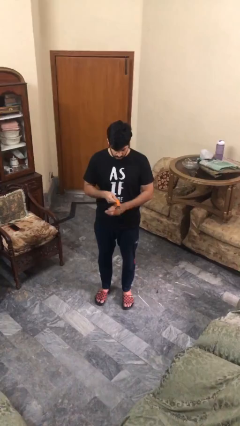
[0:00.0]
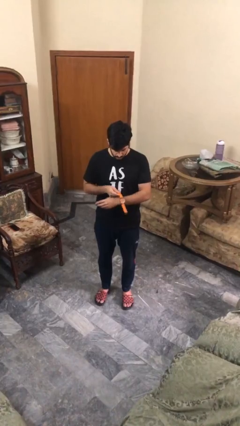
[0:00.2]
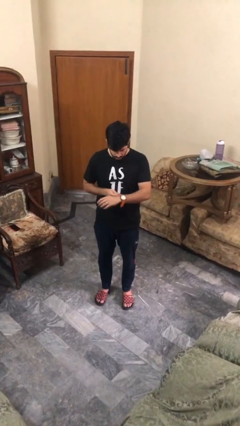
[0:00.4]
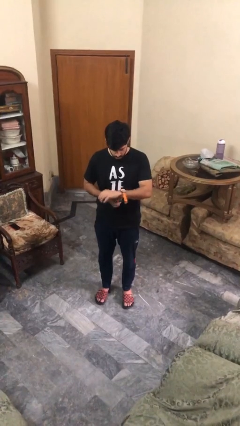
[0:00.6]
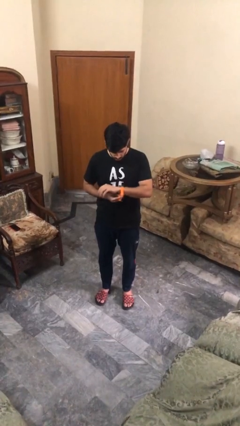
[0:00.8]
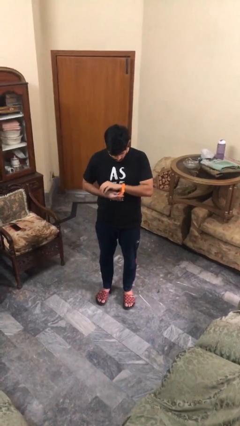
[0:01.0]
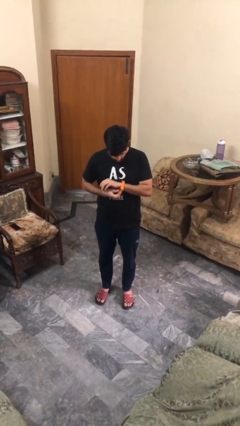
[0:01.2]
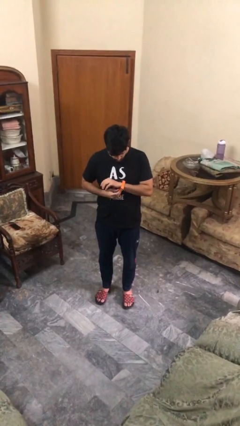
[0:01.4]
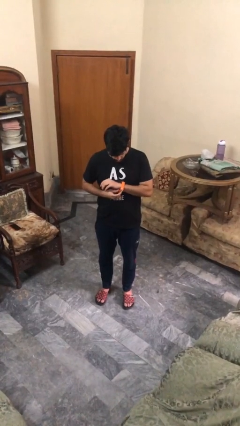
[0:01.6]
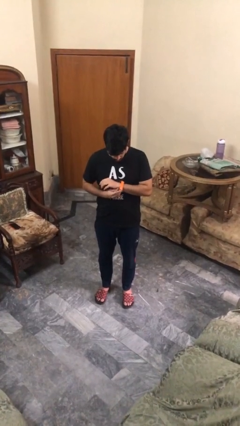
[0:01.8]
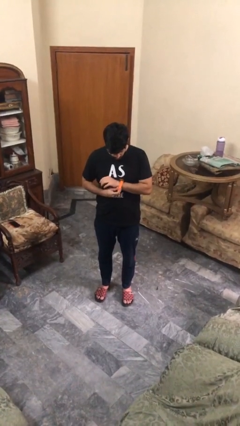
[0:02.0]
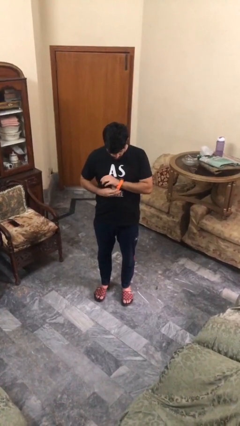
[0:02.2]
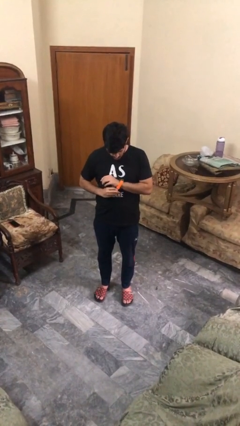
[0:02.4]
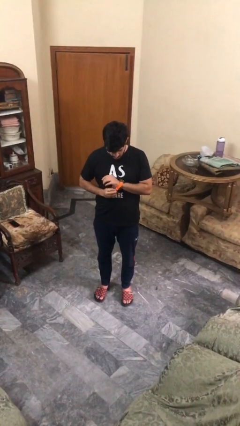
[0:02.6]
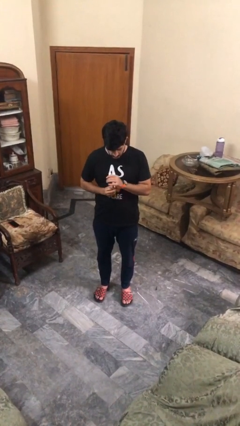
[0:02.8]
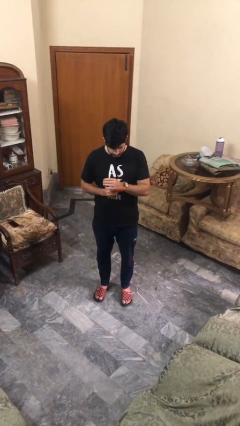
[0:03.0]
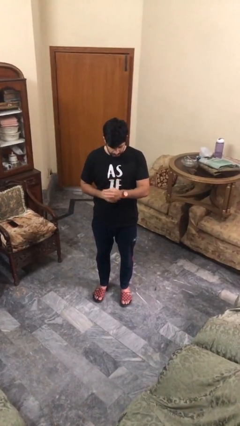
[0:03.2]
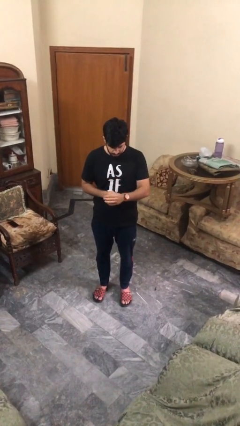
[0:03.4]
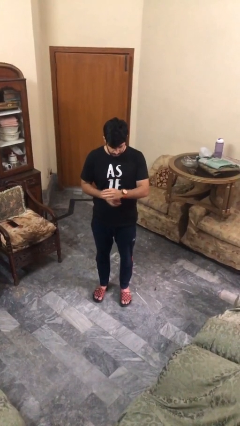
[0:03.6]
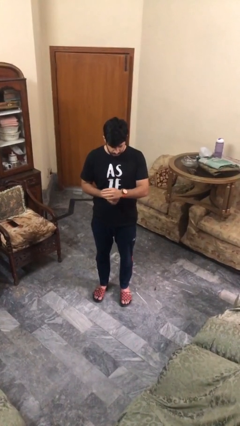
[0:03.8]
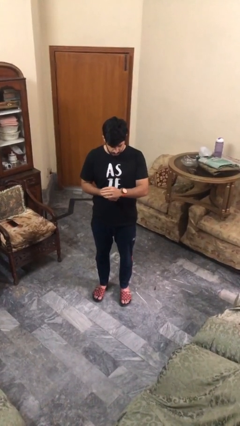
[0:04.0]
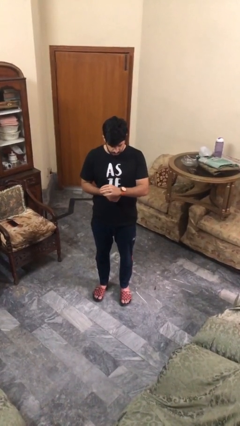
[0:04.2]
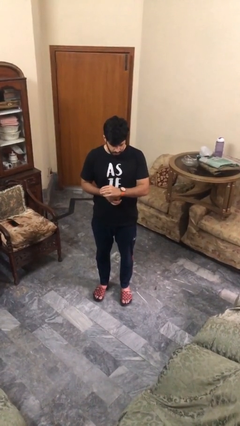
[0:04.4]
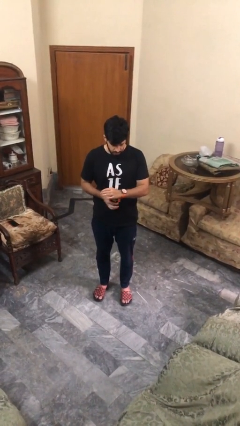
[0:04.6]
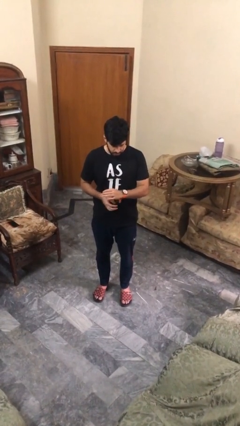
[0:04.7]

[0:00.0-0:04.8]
person puts on wristwatch

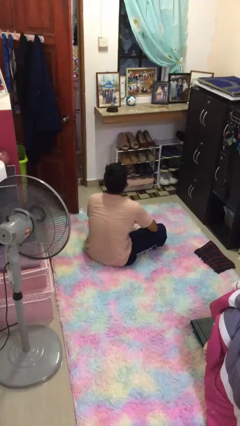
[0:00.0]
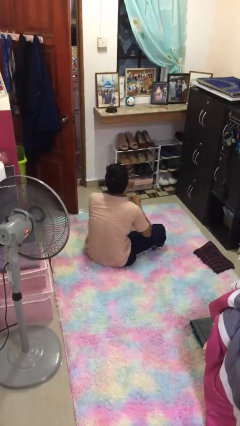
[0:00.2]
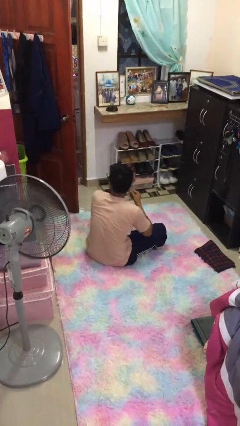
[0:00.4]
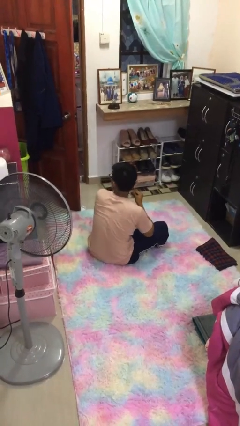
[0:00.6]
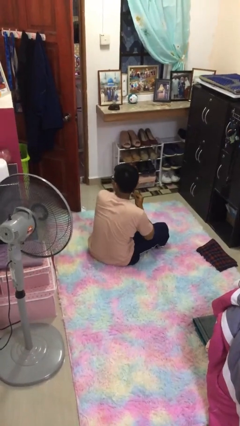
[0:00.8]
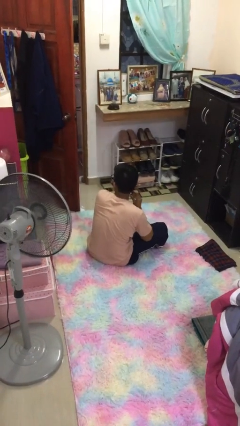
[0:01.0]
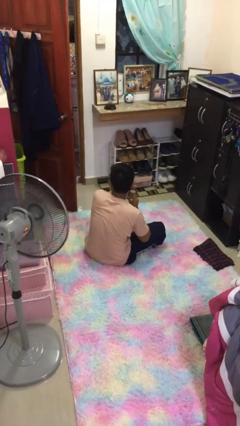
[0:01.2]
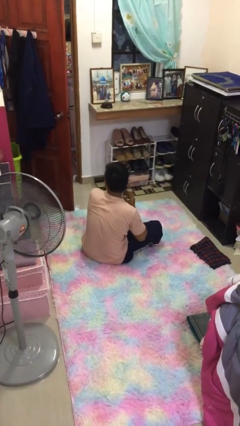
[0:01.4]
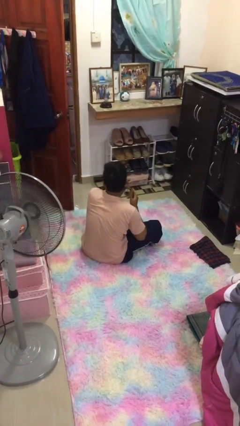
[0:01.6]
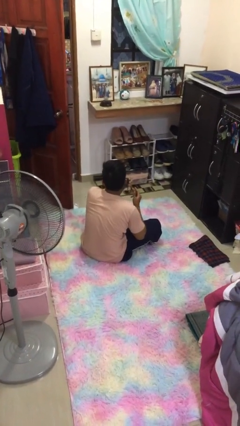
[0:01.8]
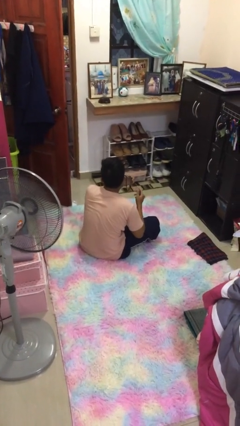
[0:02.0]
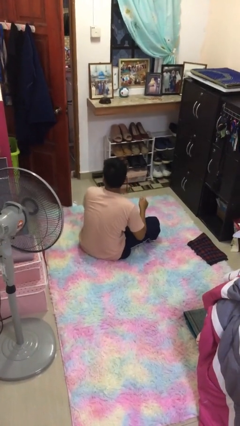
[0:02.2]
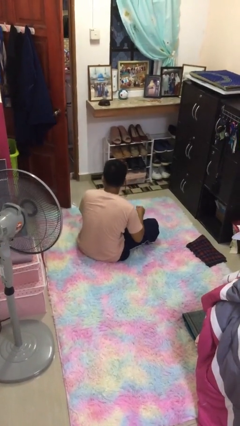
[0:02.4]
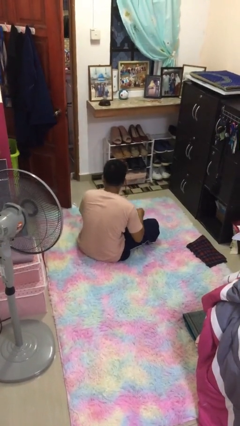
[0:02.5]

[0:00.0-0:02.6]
person puts on earrings

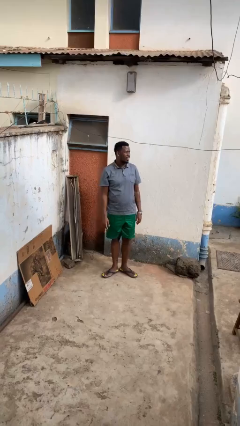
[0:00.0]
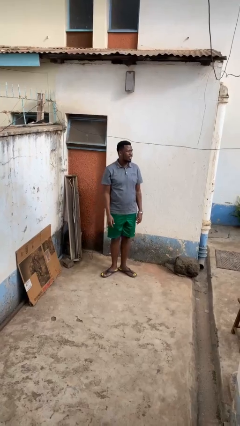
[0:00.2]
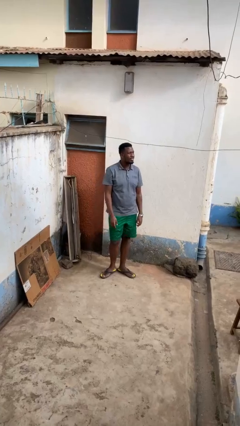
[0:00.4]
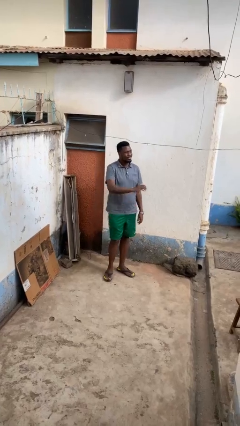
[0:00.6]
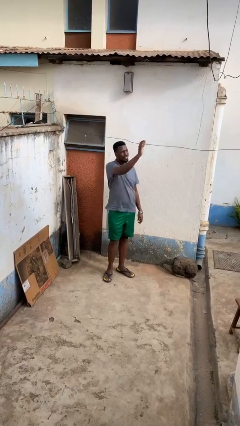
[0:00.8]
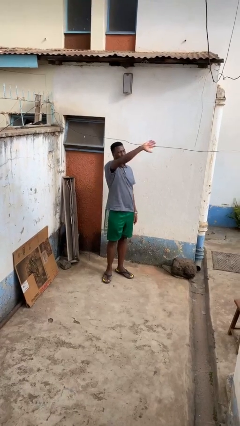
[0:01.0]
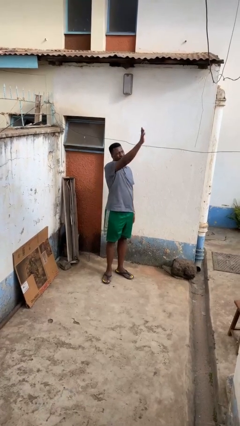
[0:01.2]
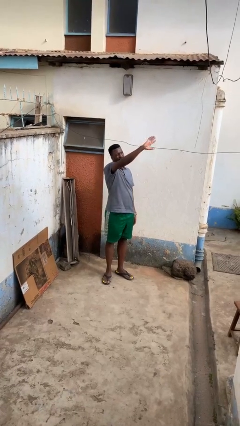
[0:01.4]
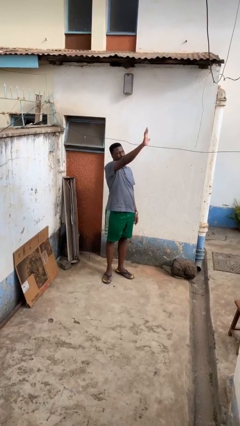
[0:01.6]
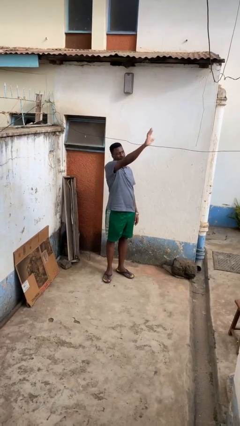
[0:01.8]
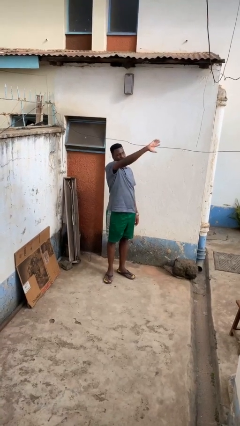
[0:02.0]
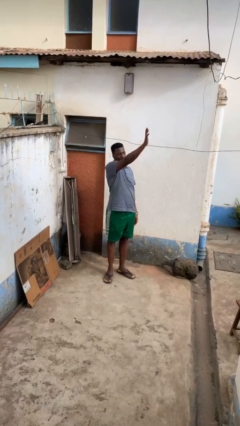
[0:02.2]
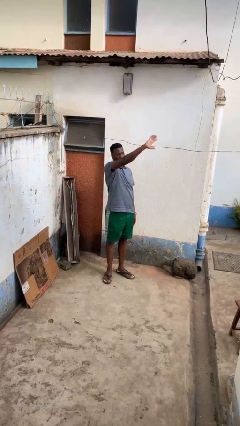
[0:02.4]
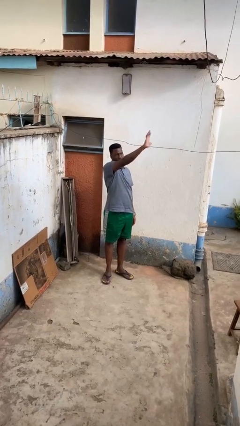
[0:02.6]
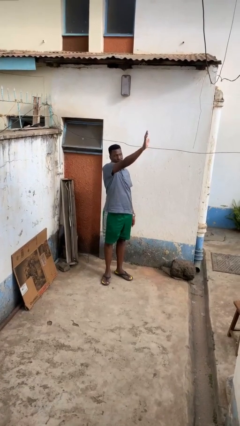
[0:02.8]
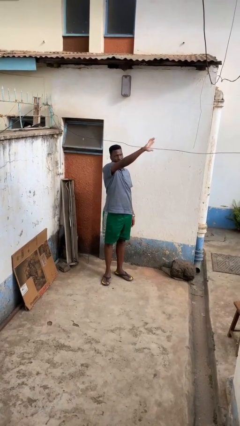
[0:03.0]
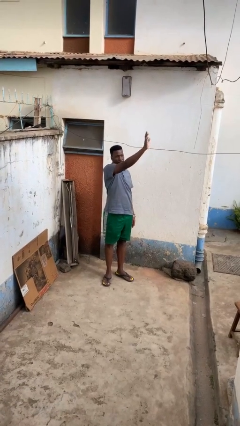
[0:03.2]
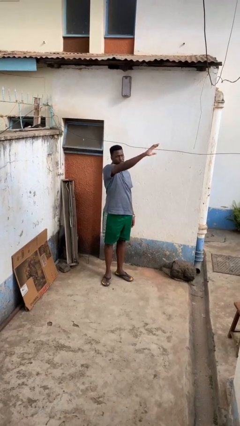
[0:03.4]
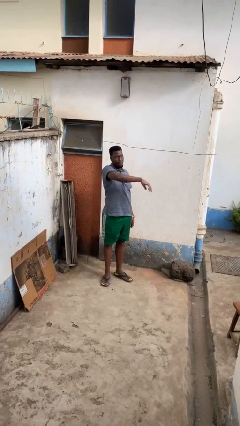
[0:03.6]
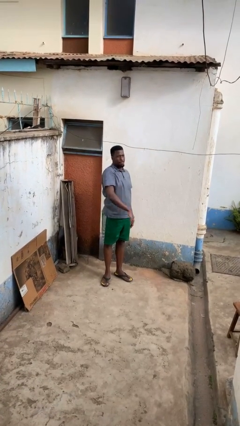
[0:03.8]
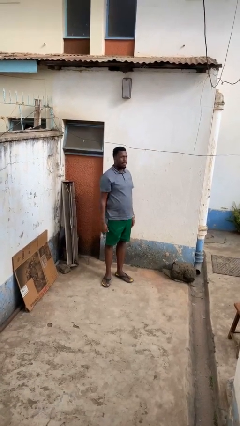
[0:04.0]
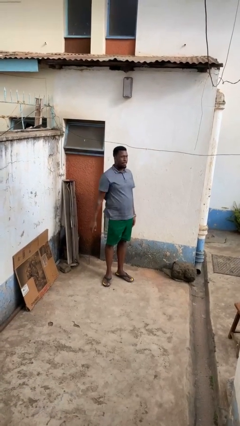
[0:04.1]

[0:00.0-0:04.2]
person waves at person

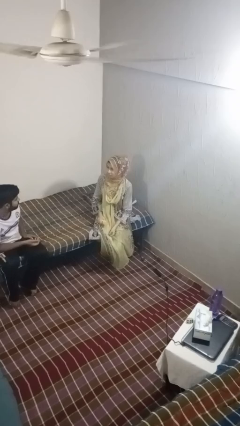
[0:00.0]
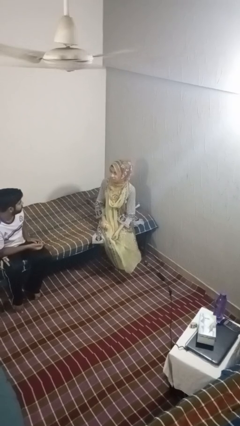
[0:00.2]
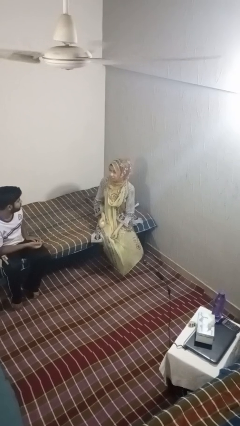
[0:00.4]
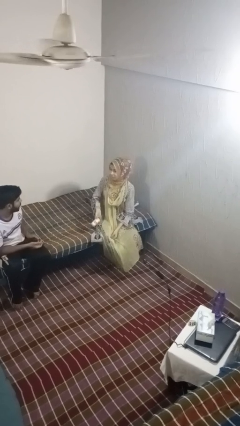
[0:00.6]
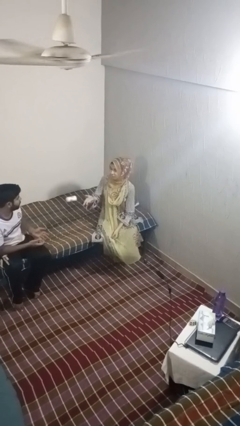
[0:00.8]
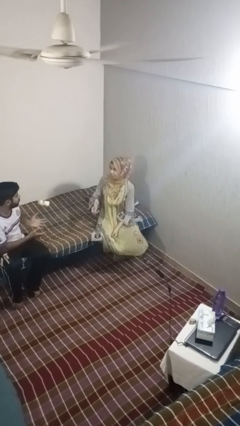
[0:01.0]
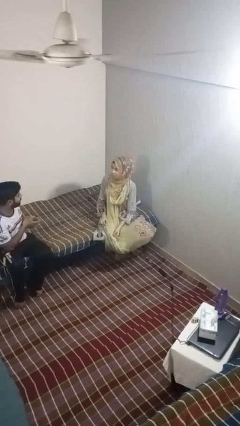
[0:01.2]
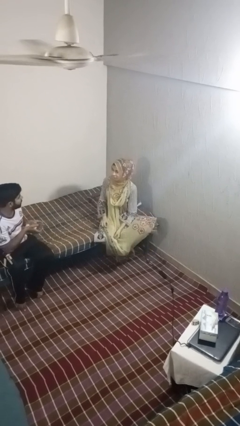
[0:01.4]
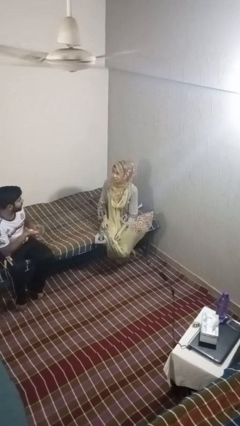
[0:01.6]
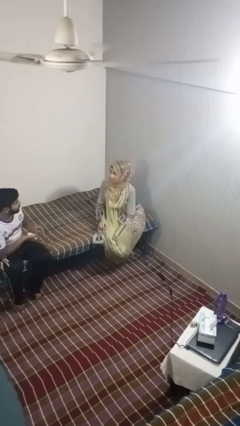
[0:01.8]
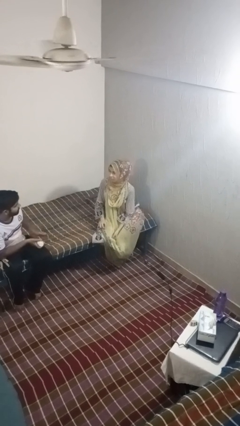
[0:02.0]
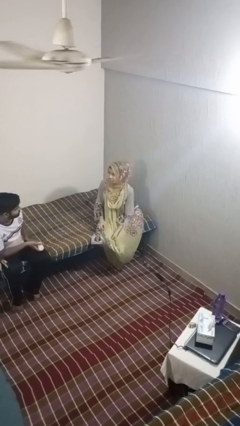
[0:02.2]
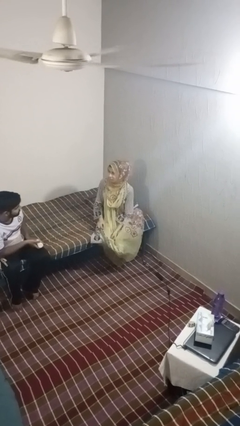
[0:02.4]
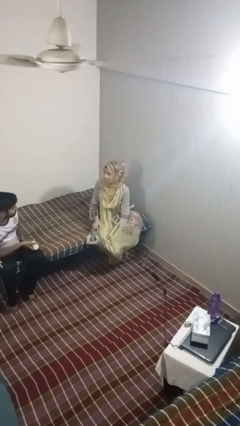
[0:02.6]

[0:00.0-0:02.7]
person throws object to person

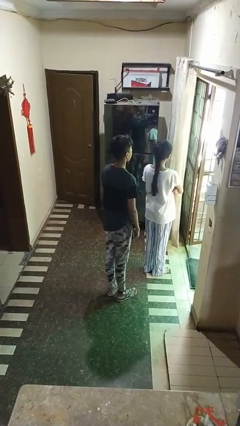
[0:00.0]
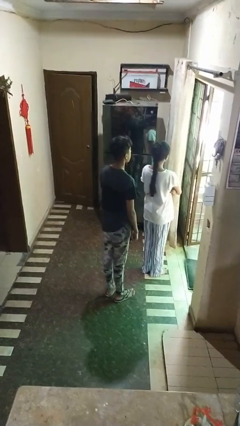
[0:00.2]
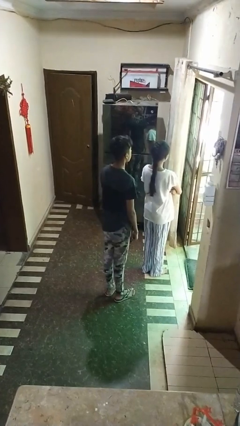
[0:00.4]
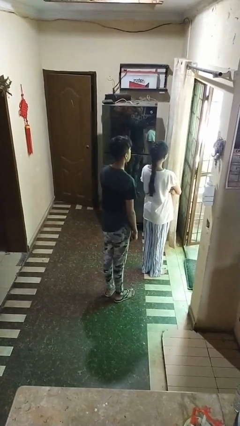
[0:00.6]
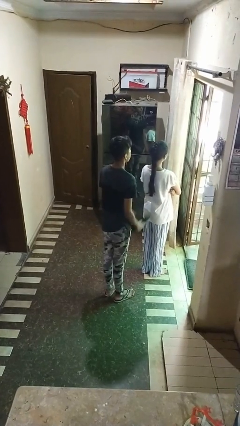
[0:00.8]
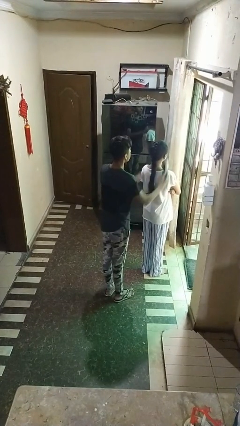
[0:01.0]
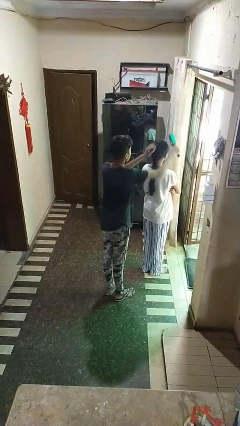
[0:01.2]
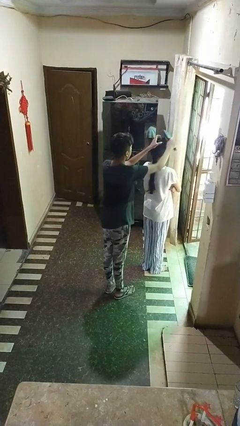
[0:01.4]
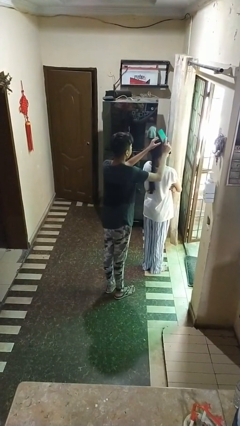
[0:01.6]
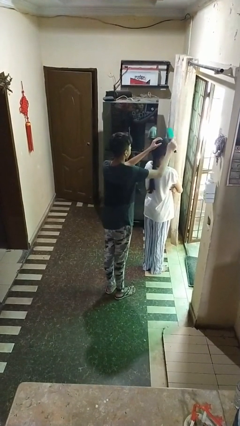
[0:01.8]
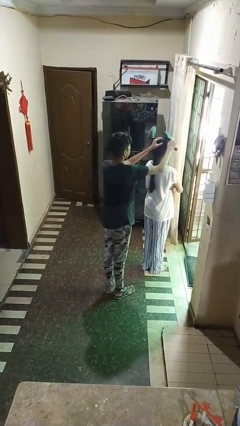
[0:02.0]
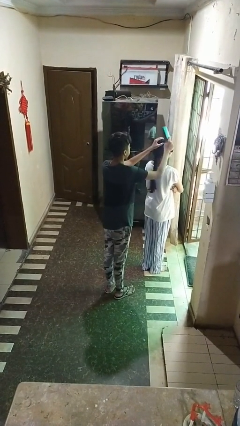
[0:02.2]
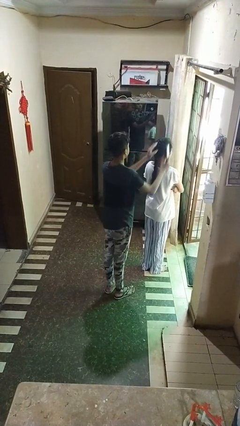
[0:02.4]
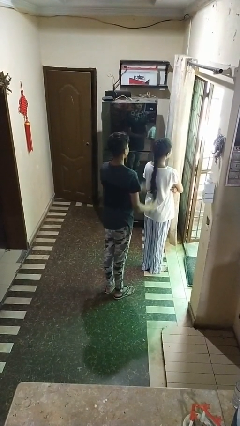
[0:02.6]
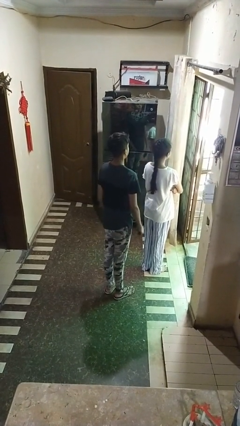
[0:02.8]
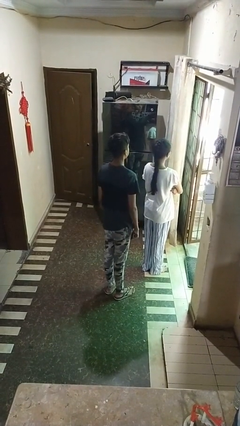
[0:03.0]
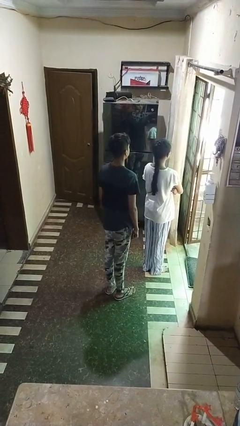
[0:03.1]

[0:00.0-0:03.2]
person brushes hair of person

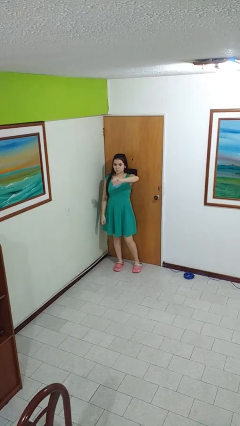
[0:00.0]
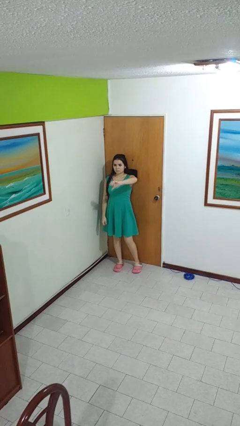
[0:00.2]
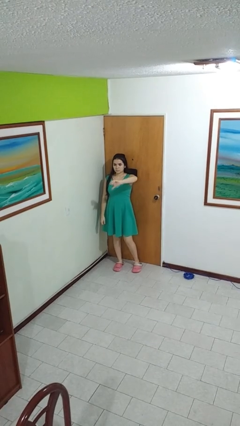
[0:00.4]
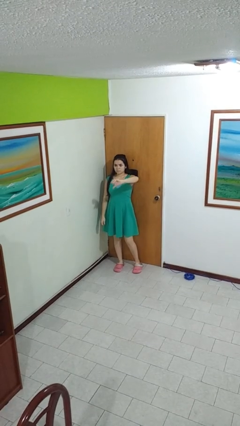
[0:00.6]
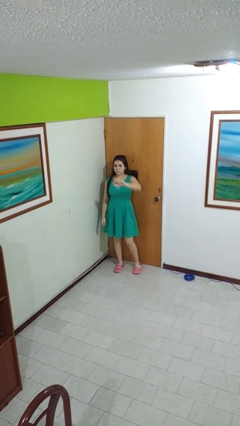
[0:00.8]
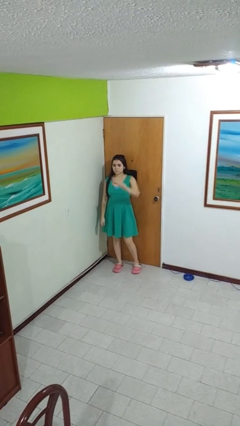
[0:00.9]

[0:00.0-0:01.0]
person gestures thumbs down
